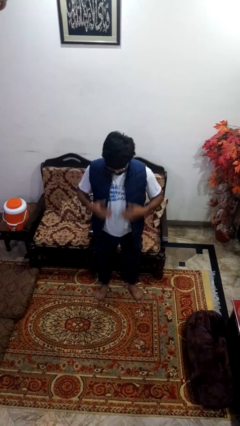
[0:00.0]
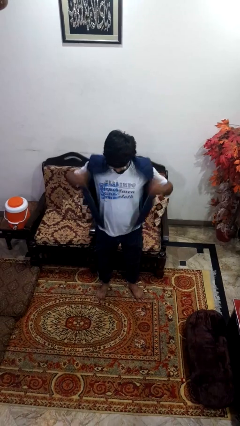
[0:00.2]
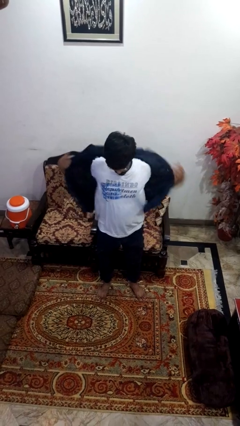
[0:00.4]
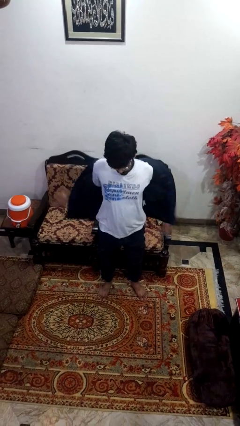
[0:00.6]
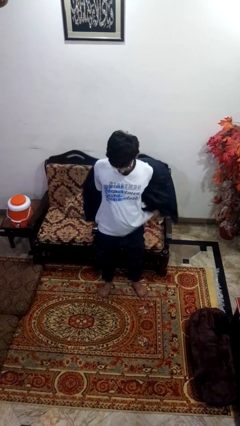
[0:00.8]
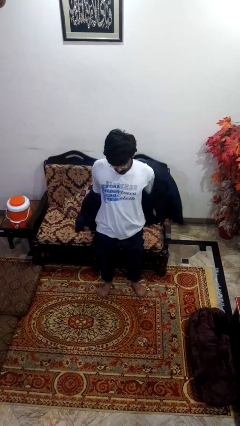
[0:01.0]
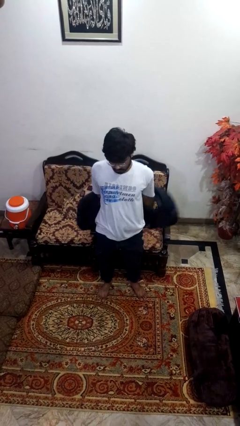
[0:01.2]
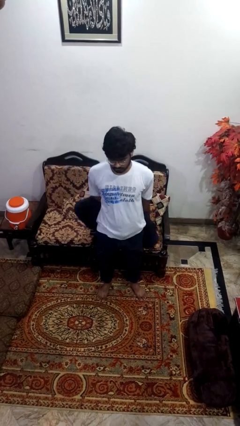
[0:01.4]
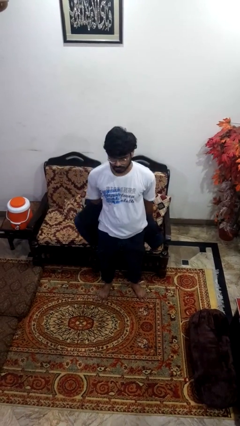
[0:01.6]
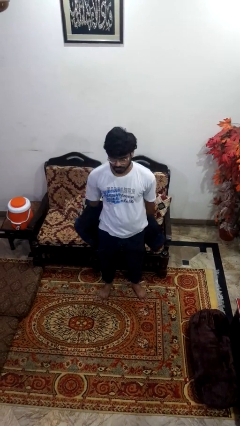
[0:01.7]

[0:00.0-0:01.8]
person takes off jacket

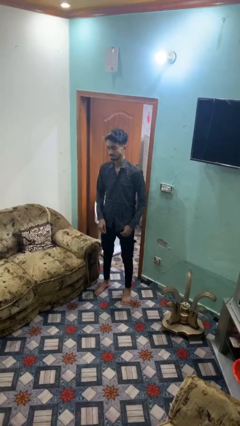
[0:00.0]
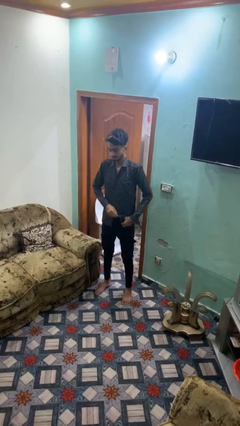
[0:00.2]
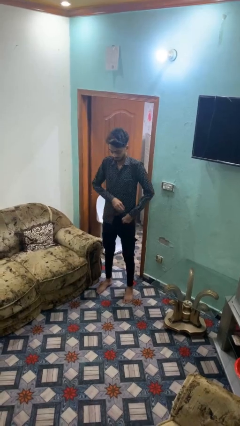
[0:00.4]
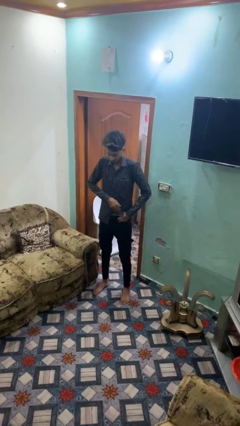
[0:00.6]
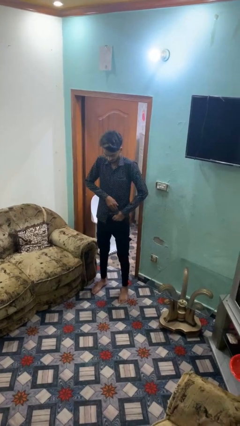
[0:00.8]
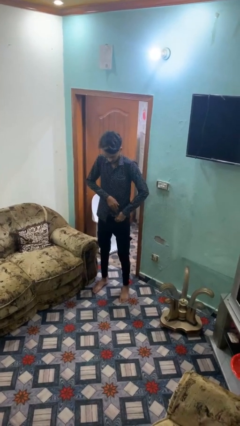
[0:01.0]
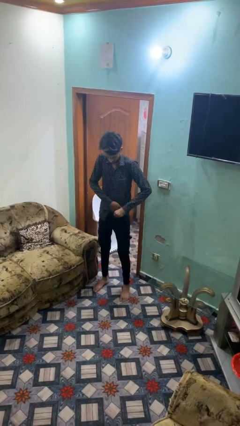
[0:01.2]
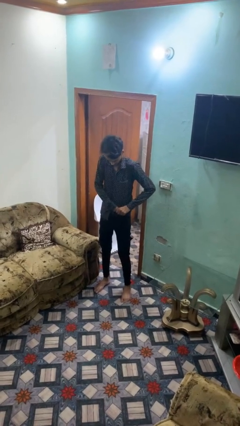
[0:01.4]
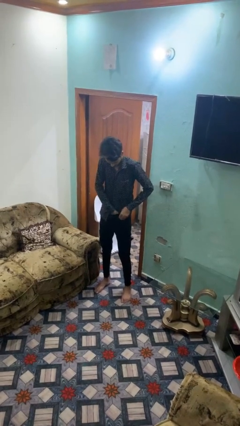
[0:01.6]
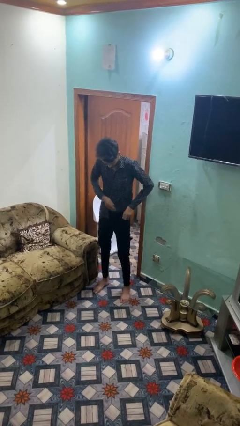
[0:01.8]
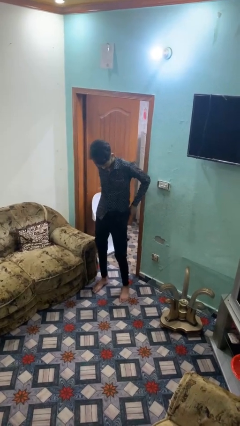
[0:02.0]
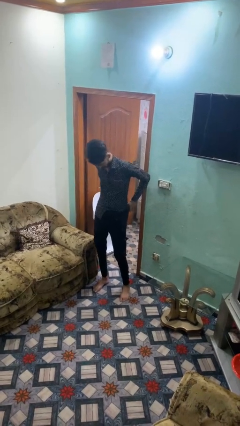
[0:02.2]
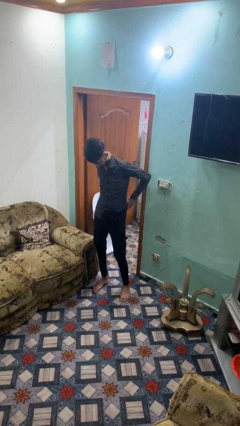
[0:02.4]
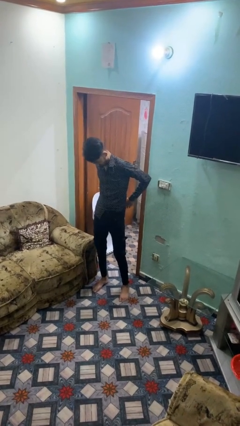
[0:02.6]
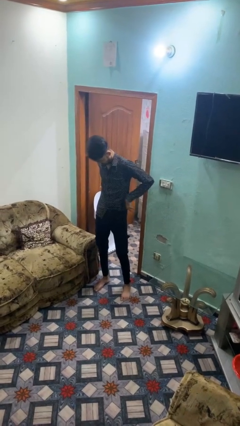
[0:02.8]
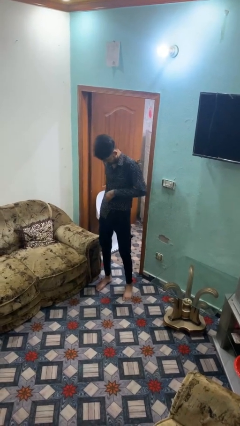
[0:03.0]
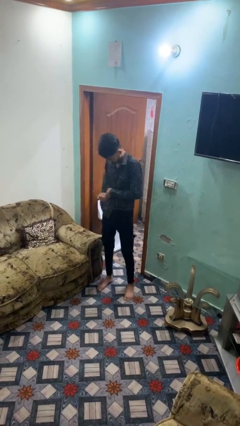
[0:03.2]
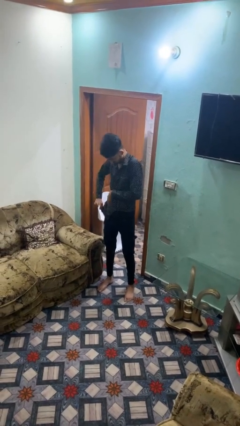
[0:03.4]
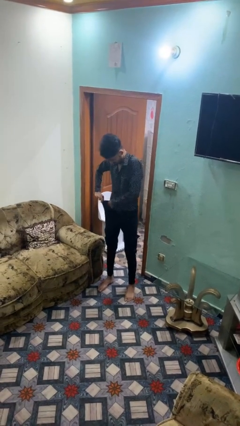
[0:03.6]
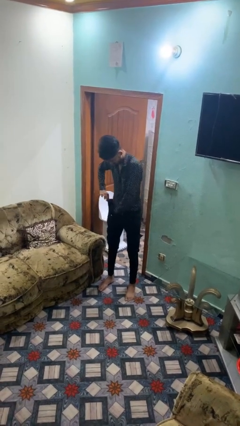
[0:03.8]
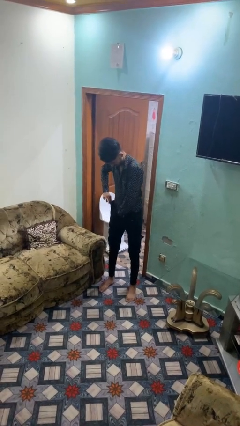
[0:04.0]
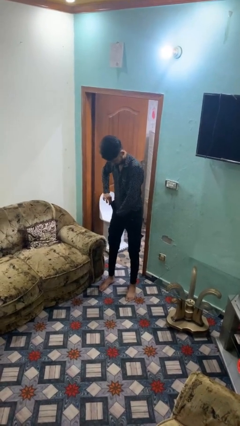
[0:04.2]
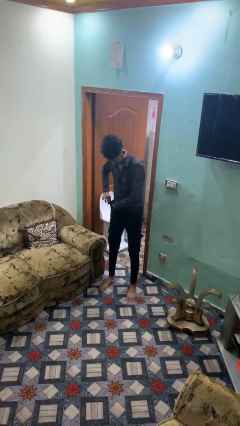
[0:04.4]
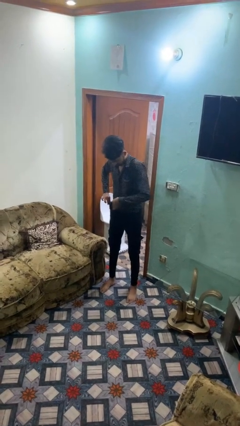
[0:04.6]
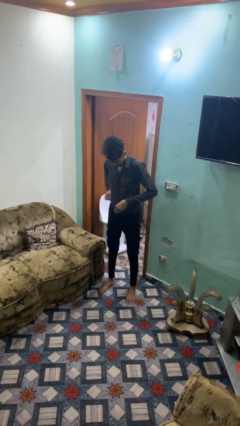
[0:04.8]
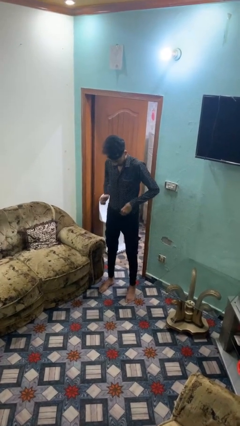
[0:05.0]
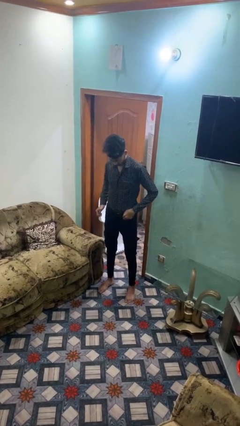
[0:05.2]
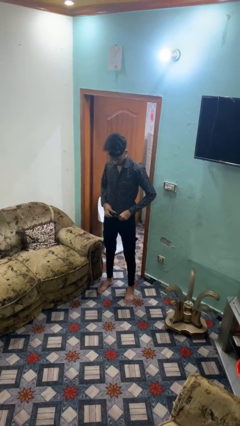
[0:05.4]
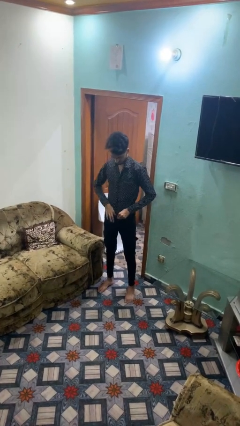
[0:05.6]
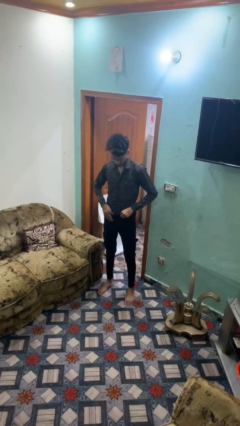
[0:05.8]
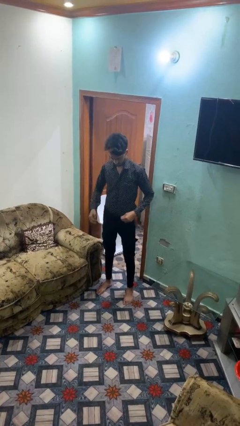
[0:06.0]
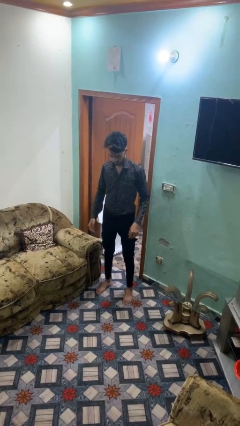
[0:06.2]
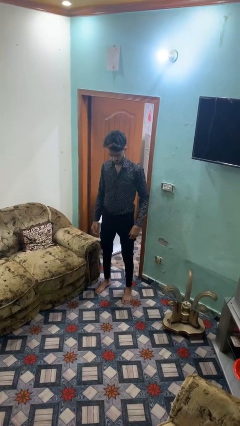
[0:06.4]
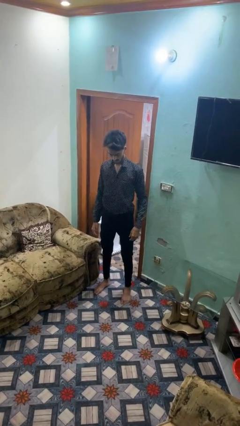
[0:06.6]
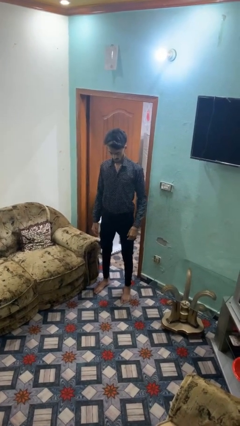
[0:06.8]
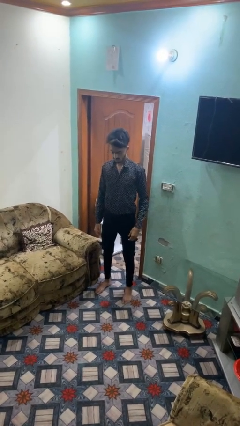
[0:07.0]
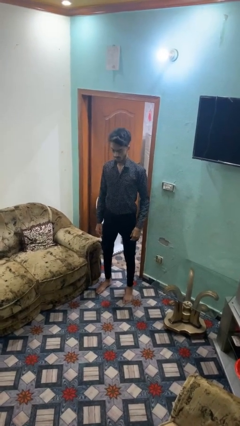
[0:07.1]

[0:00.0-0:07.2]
person tucks in shirt

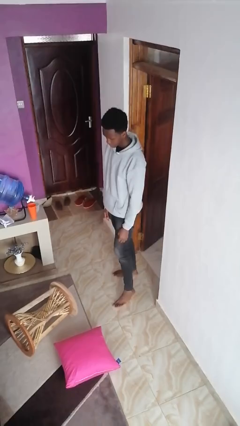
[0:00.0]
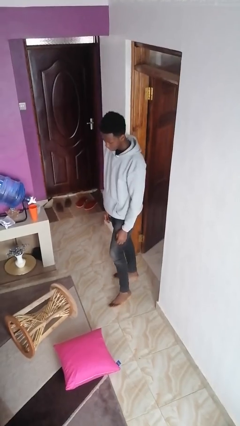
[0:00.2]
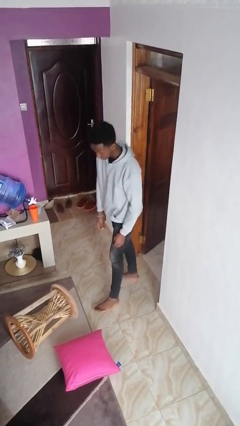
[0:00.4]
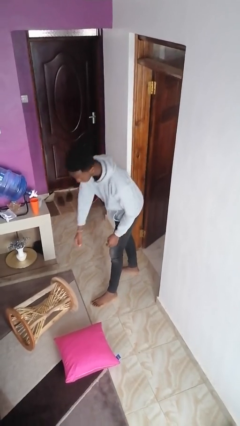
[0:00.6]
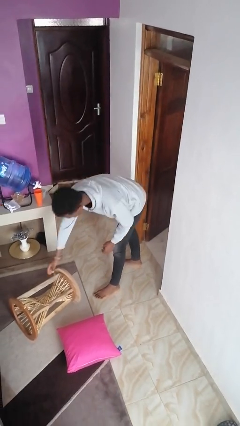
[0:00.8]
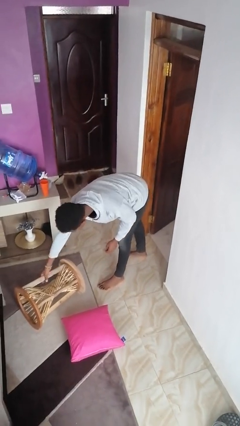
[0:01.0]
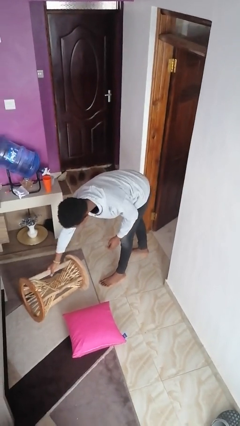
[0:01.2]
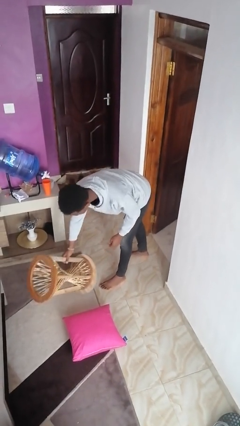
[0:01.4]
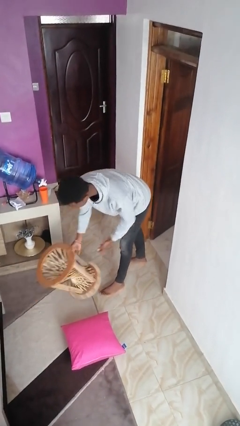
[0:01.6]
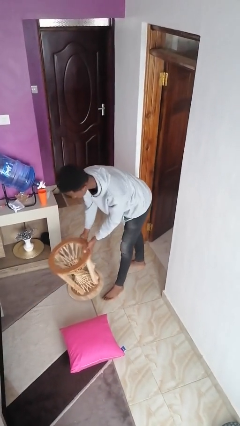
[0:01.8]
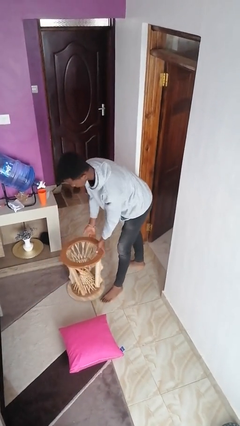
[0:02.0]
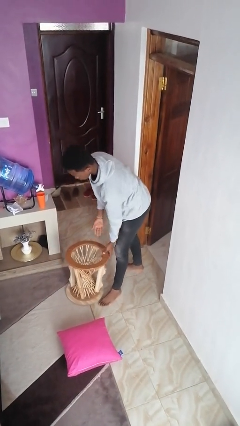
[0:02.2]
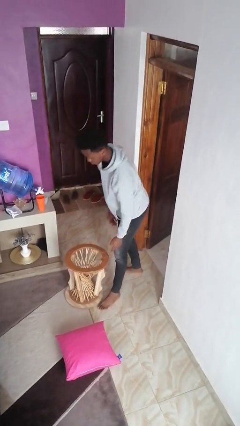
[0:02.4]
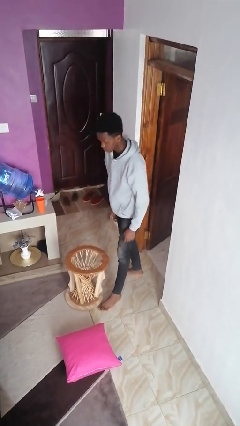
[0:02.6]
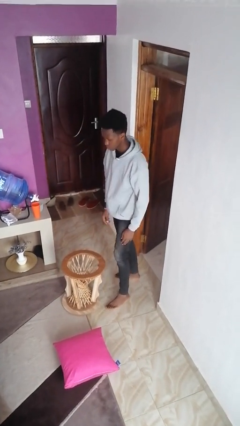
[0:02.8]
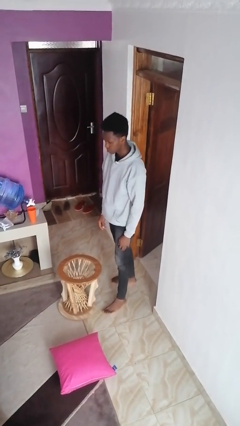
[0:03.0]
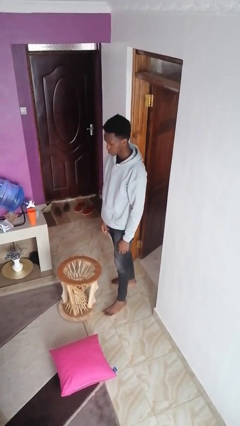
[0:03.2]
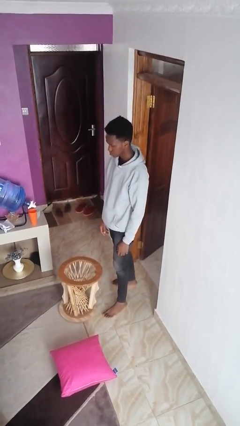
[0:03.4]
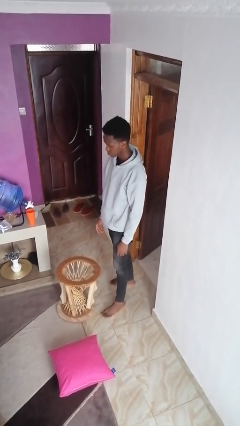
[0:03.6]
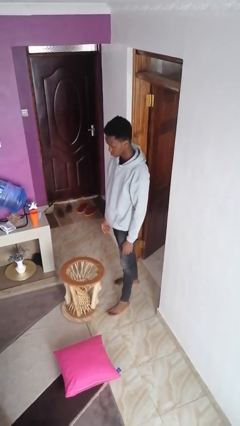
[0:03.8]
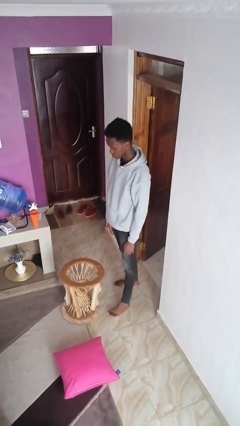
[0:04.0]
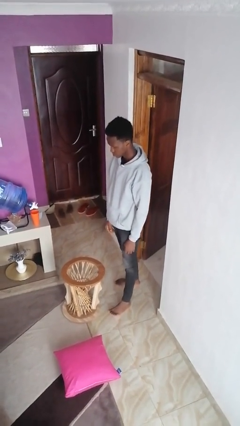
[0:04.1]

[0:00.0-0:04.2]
person sets upright furniture

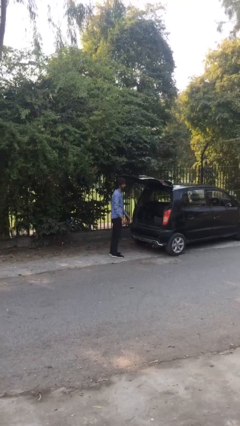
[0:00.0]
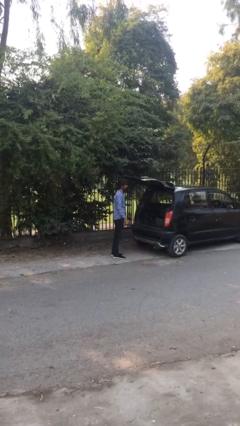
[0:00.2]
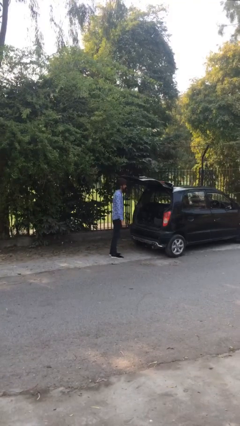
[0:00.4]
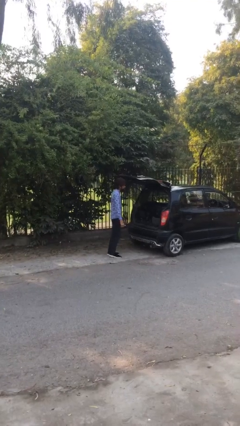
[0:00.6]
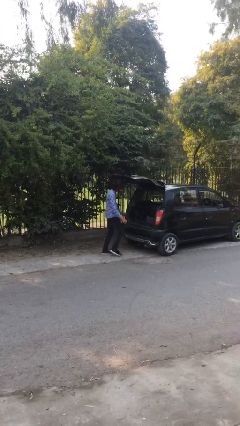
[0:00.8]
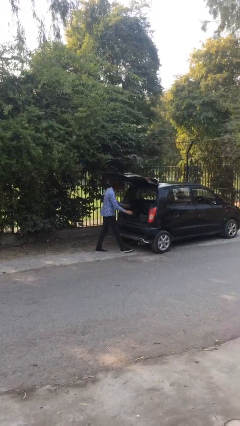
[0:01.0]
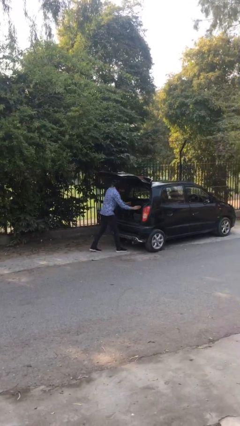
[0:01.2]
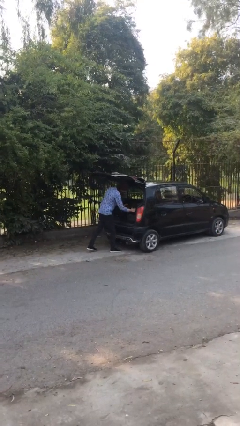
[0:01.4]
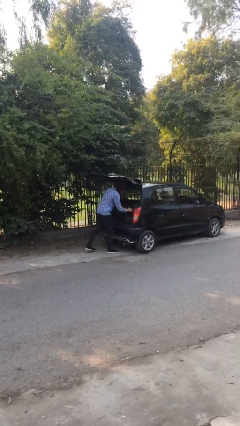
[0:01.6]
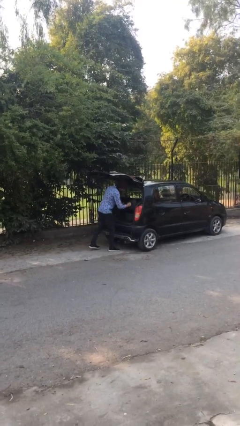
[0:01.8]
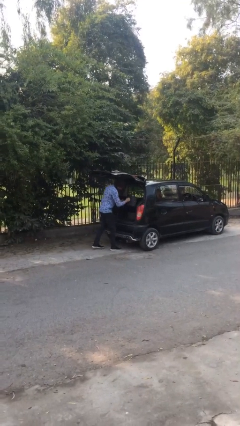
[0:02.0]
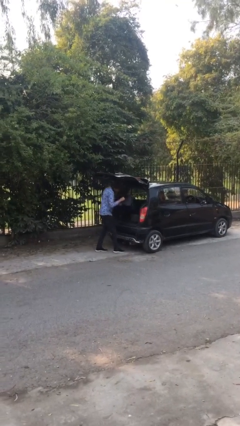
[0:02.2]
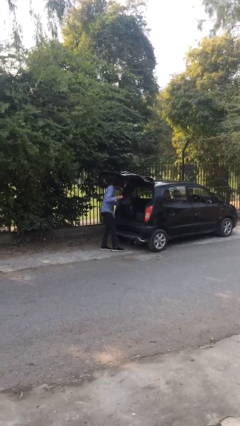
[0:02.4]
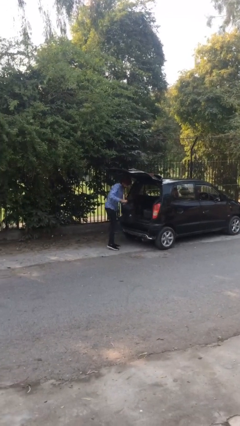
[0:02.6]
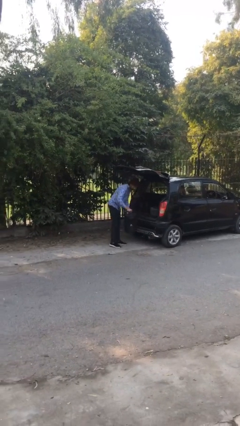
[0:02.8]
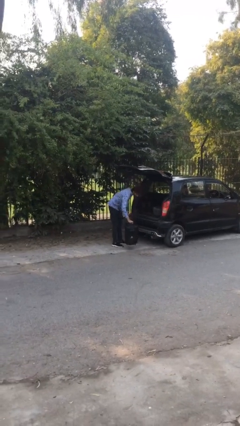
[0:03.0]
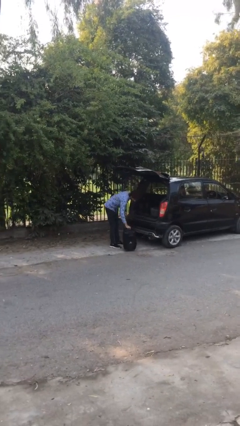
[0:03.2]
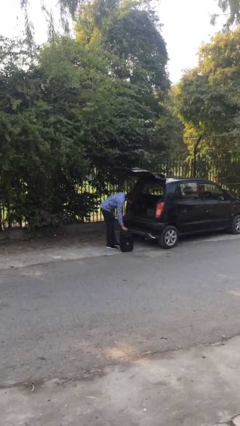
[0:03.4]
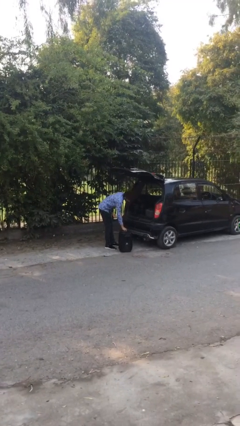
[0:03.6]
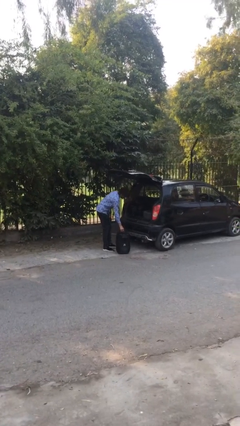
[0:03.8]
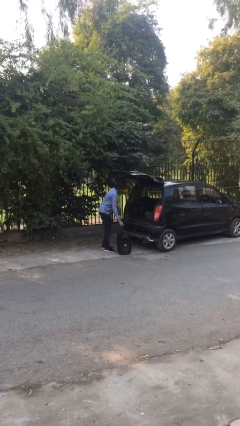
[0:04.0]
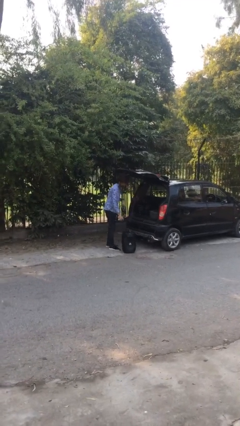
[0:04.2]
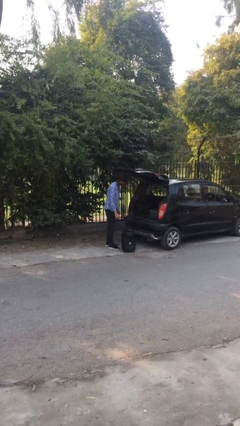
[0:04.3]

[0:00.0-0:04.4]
person unloads car

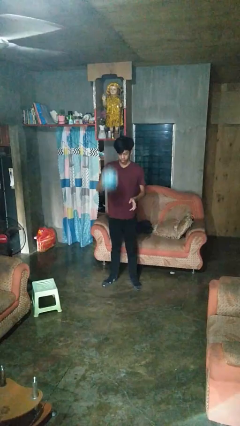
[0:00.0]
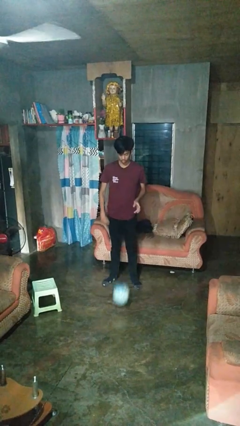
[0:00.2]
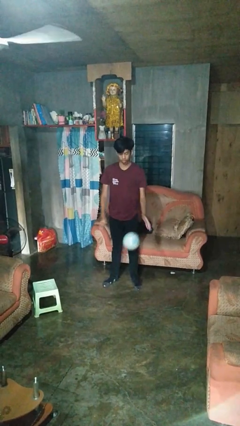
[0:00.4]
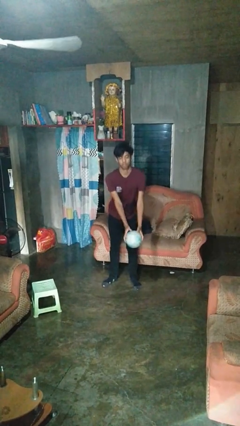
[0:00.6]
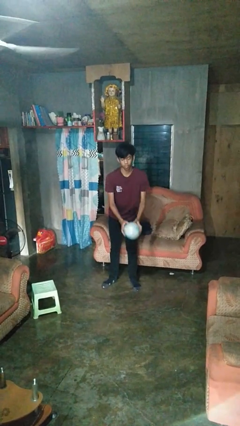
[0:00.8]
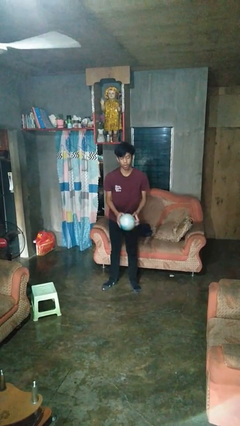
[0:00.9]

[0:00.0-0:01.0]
person bounces ball on floor
